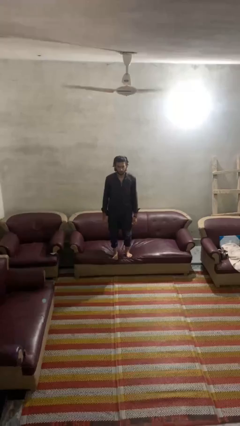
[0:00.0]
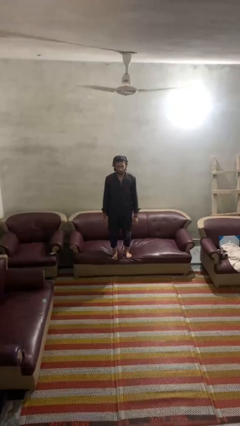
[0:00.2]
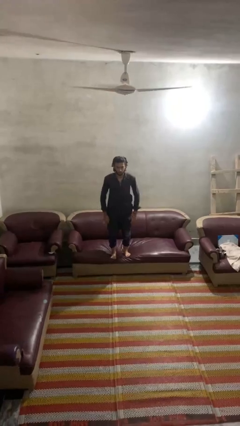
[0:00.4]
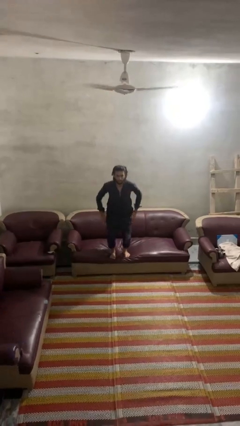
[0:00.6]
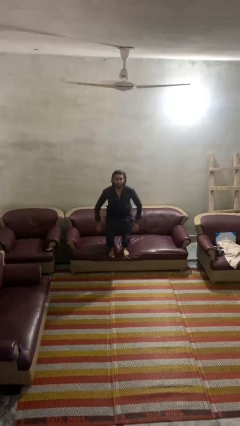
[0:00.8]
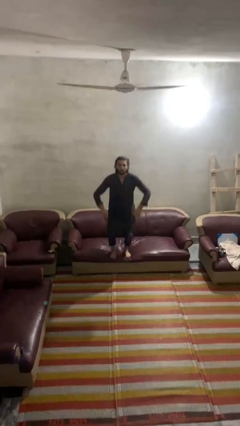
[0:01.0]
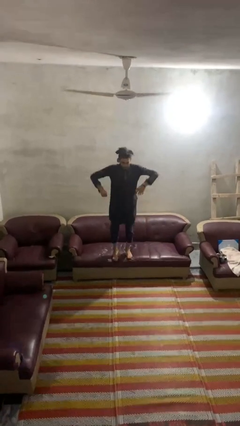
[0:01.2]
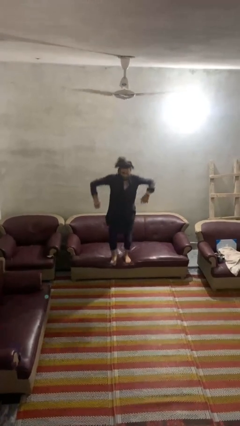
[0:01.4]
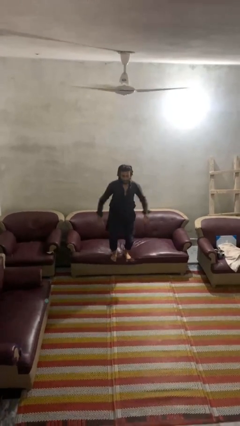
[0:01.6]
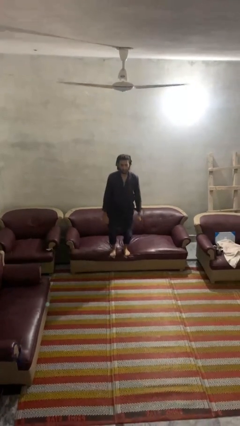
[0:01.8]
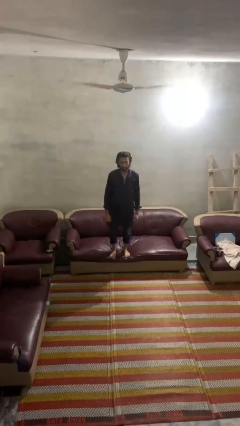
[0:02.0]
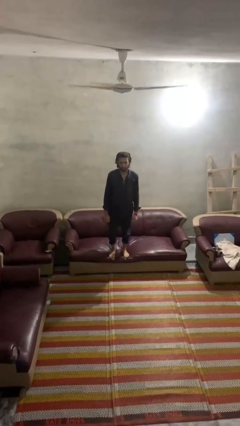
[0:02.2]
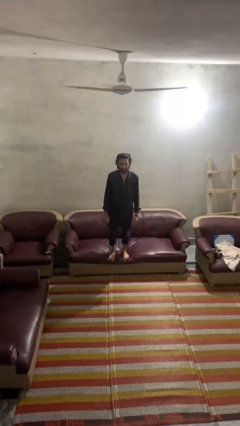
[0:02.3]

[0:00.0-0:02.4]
person jumps on couch

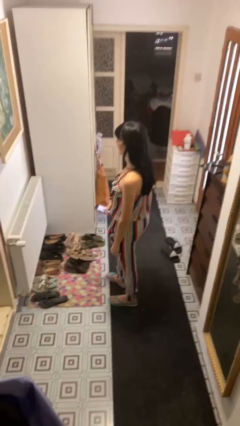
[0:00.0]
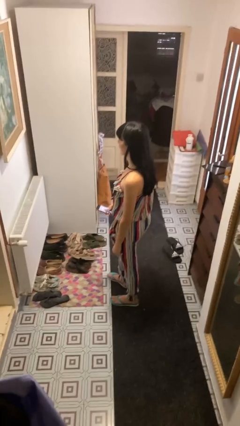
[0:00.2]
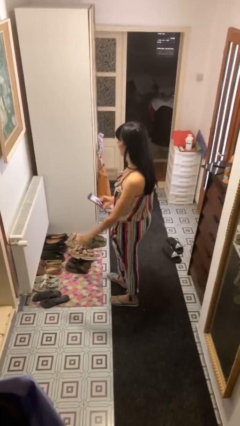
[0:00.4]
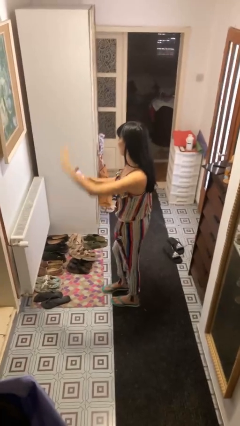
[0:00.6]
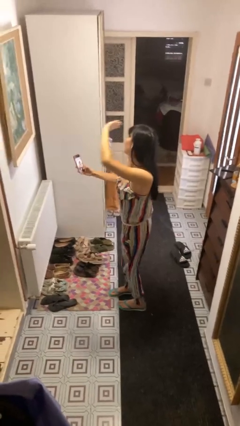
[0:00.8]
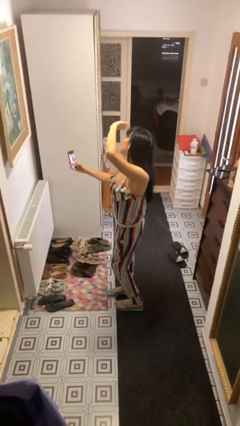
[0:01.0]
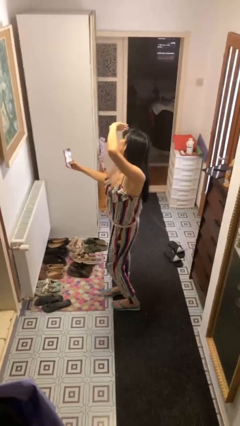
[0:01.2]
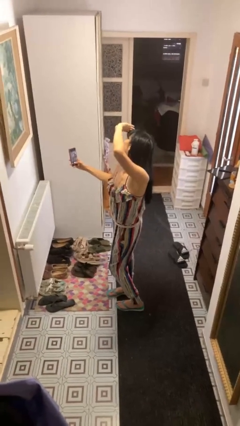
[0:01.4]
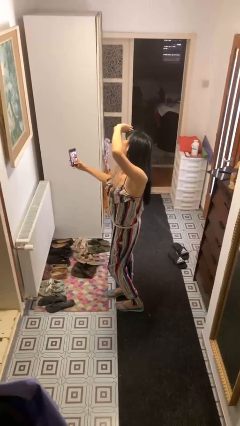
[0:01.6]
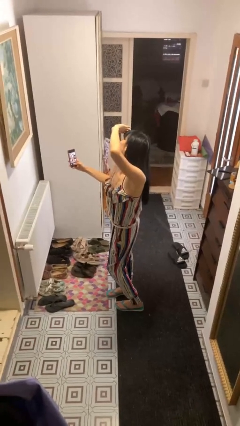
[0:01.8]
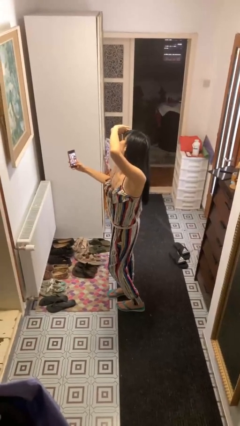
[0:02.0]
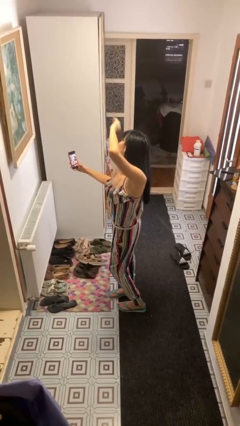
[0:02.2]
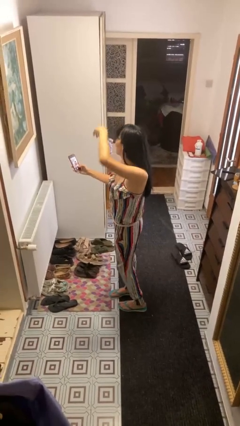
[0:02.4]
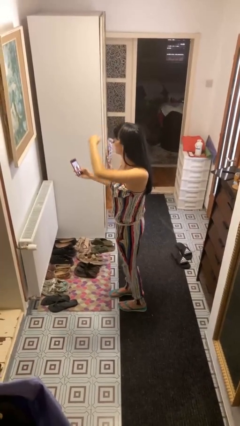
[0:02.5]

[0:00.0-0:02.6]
person takes selfie

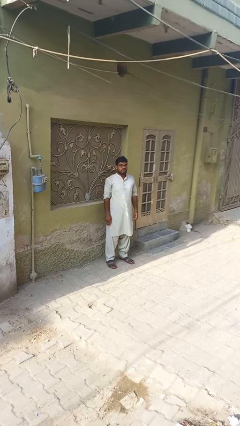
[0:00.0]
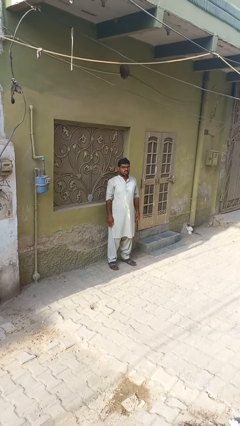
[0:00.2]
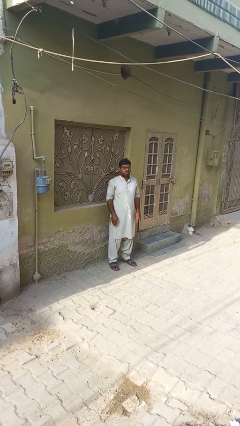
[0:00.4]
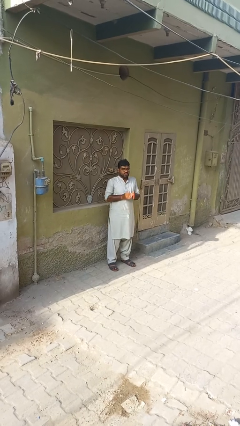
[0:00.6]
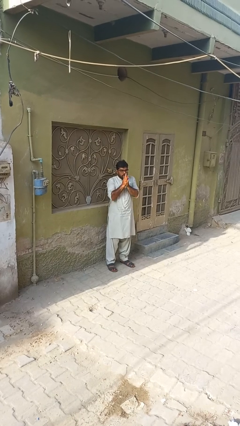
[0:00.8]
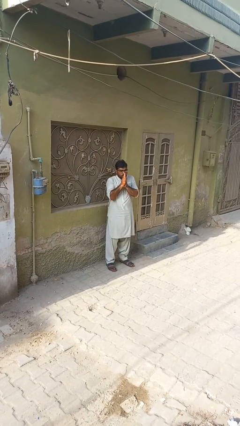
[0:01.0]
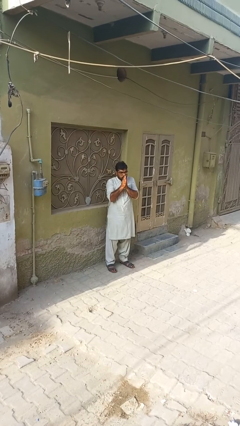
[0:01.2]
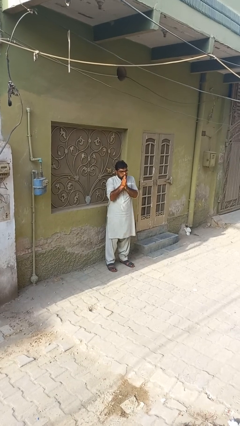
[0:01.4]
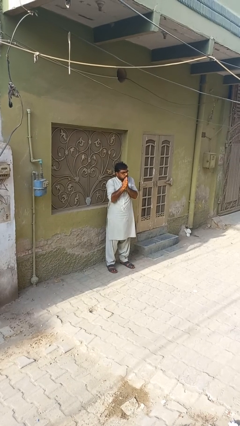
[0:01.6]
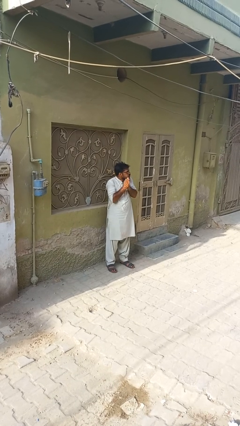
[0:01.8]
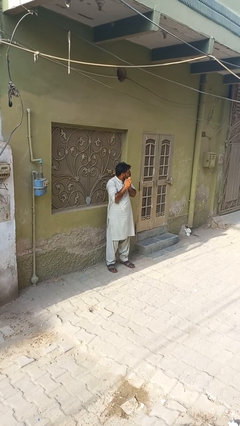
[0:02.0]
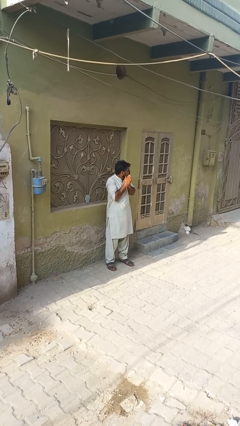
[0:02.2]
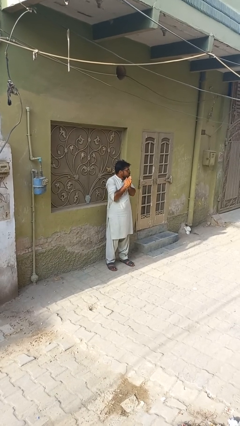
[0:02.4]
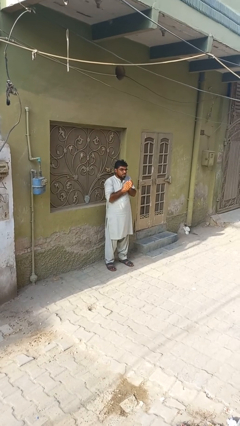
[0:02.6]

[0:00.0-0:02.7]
person blows into hands

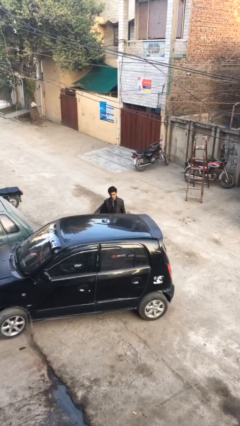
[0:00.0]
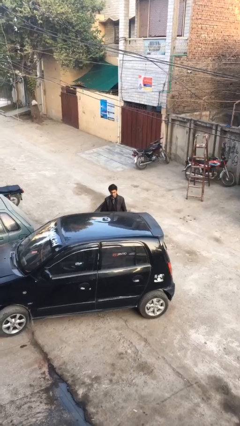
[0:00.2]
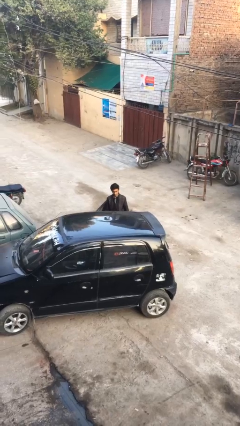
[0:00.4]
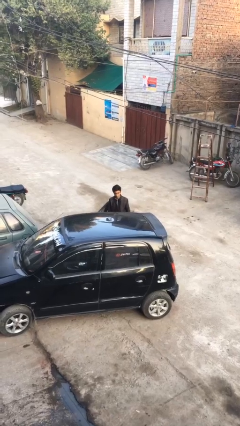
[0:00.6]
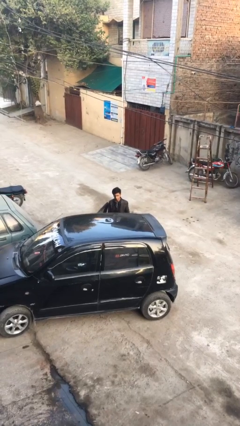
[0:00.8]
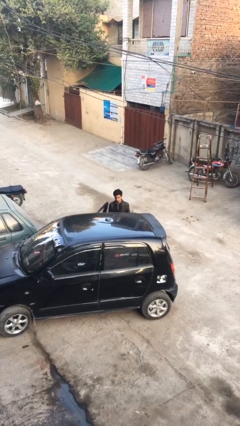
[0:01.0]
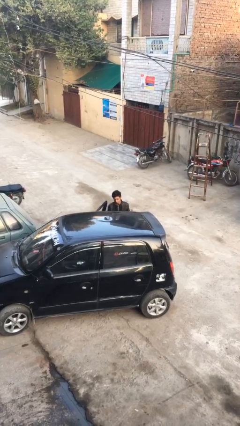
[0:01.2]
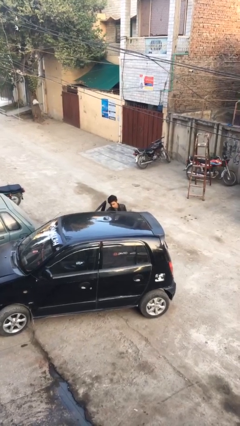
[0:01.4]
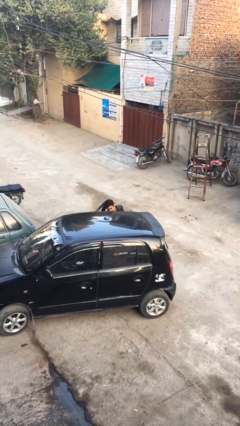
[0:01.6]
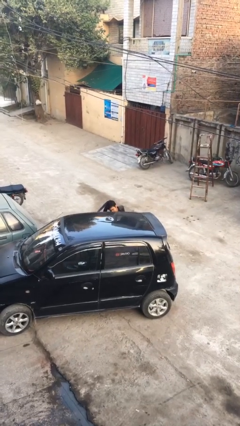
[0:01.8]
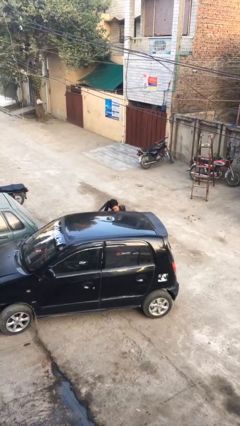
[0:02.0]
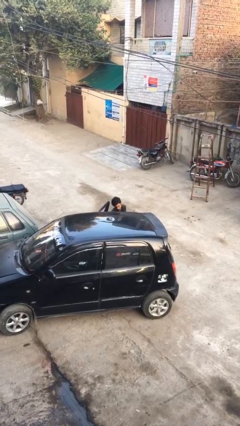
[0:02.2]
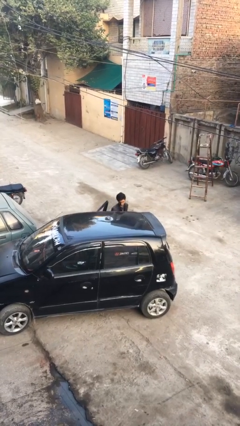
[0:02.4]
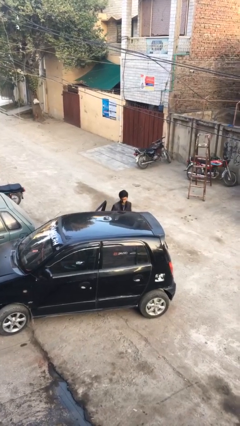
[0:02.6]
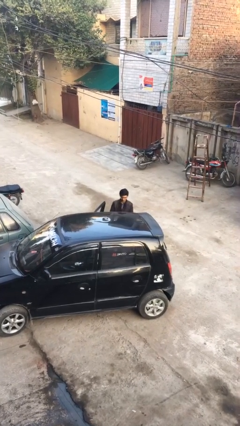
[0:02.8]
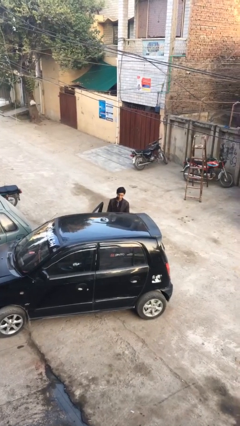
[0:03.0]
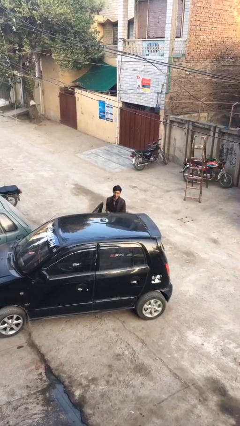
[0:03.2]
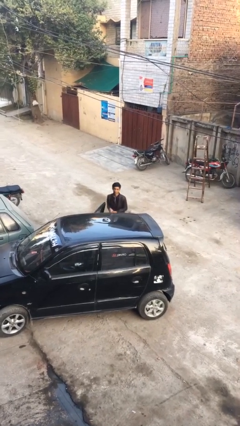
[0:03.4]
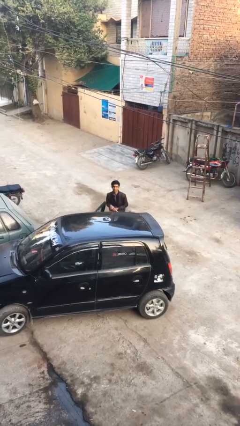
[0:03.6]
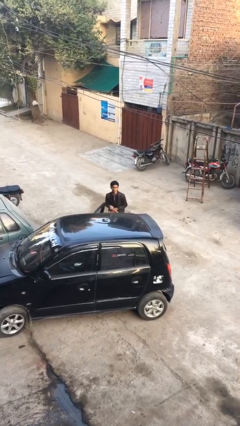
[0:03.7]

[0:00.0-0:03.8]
person unloads car

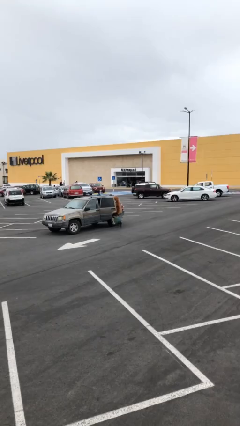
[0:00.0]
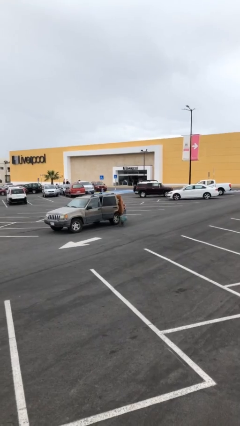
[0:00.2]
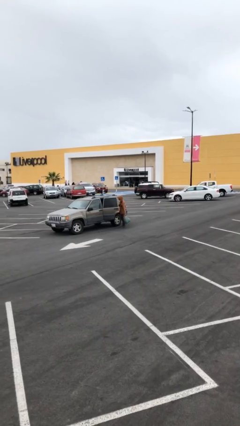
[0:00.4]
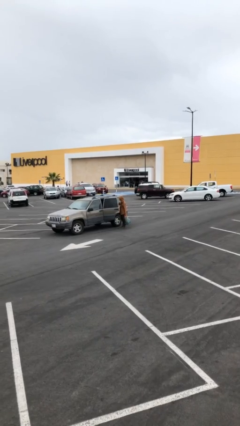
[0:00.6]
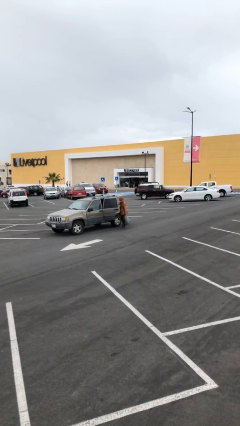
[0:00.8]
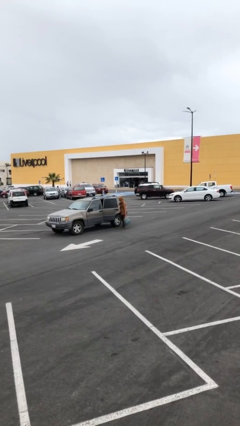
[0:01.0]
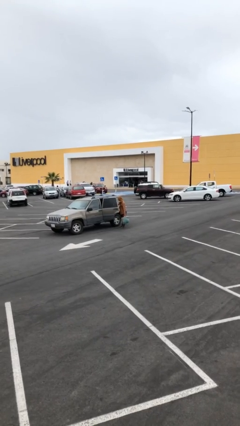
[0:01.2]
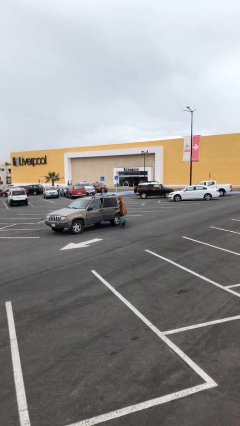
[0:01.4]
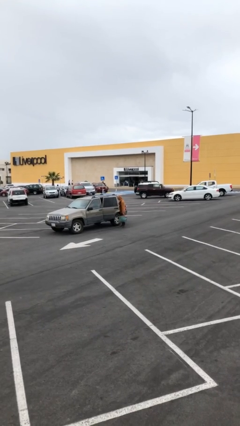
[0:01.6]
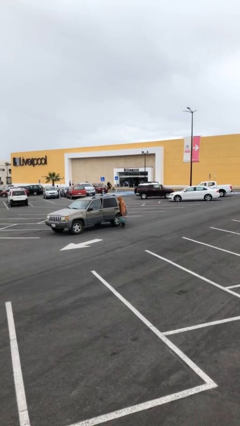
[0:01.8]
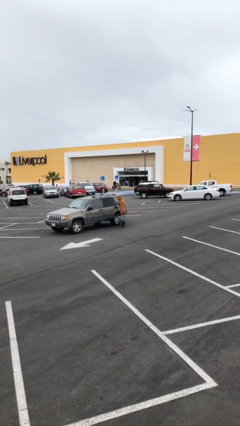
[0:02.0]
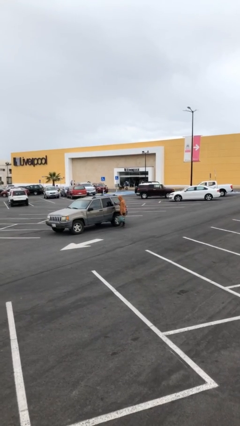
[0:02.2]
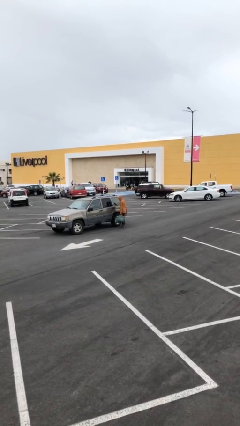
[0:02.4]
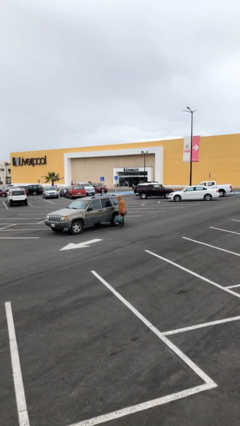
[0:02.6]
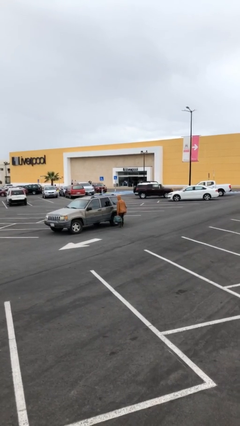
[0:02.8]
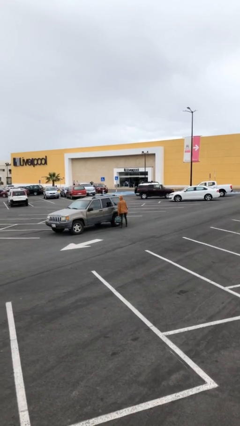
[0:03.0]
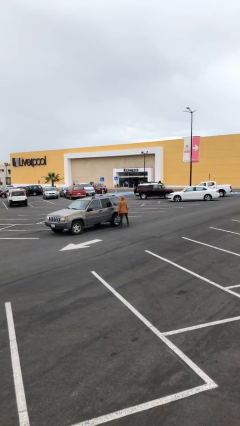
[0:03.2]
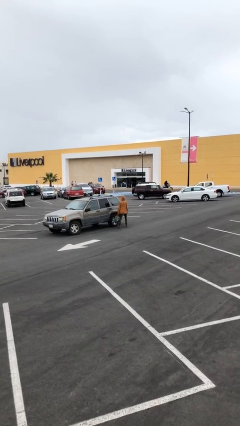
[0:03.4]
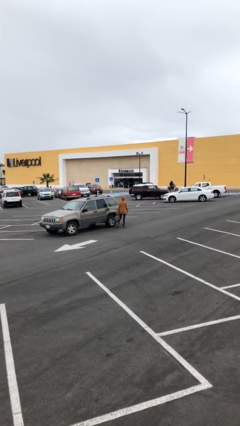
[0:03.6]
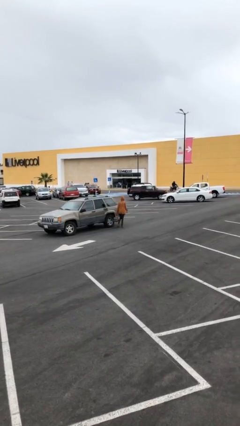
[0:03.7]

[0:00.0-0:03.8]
person closes car door

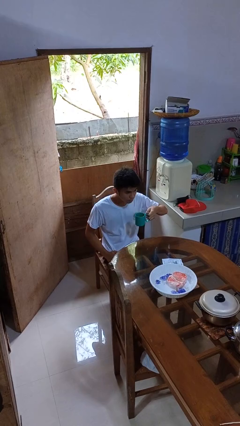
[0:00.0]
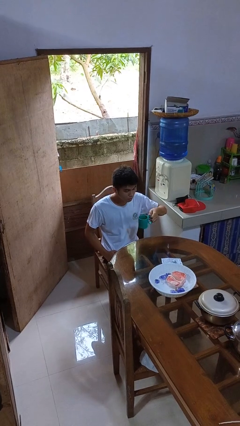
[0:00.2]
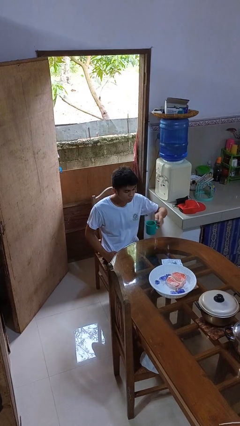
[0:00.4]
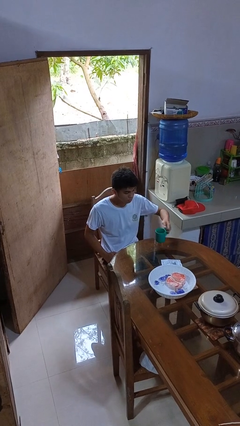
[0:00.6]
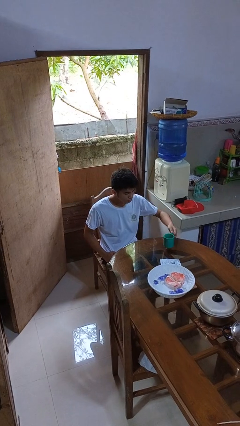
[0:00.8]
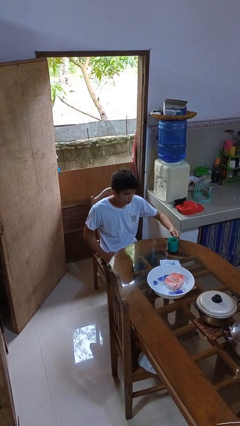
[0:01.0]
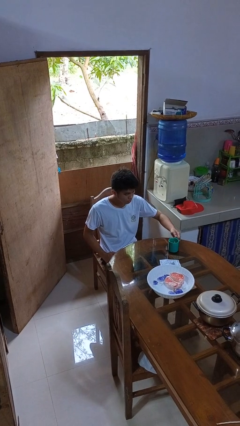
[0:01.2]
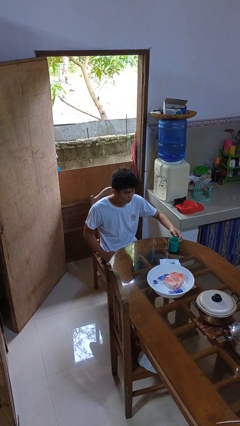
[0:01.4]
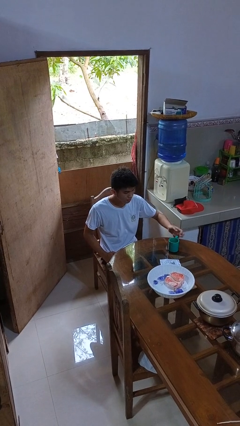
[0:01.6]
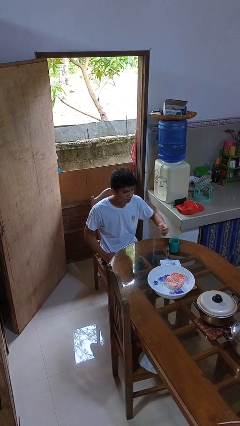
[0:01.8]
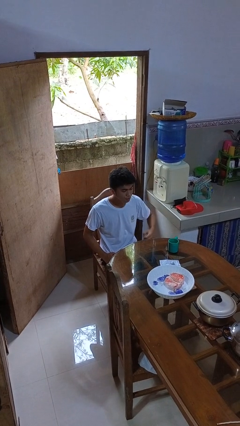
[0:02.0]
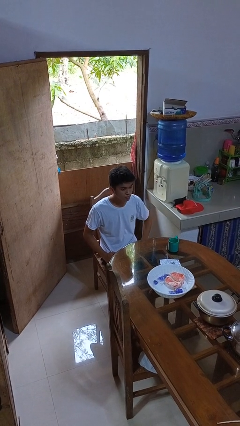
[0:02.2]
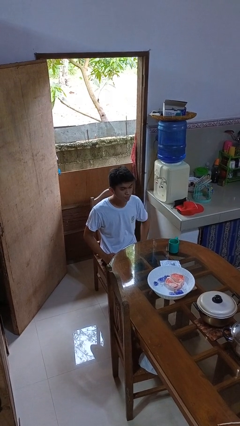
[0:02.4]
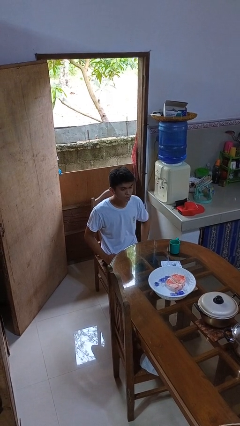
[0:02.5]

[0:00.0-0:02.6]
person puts down object on table
